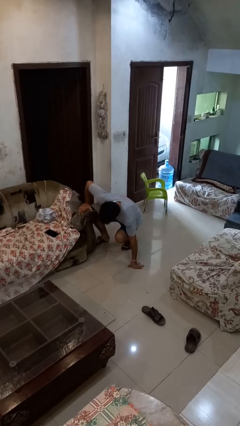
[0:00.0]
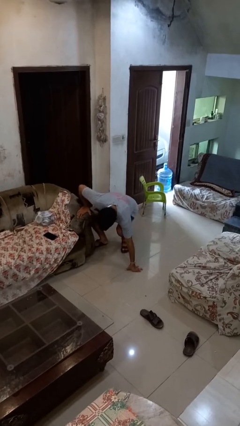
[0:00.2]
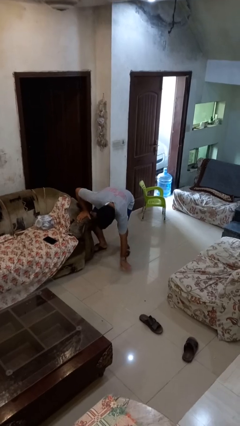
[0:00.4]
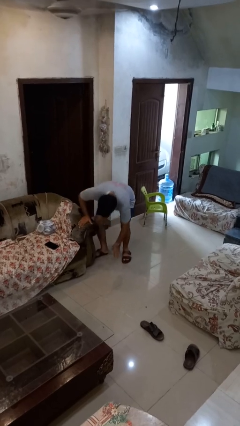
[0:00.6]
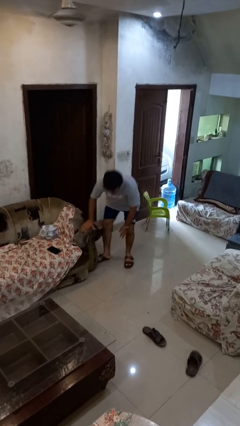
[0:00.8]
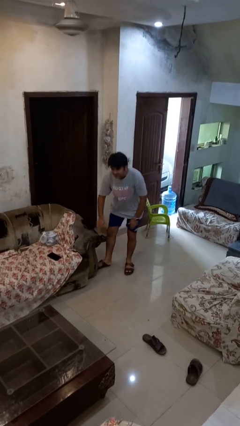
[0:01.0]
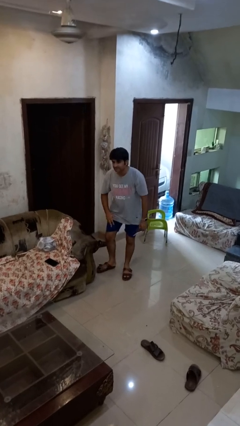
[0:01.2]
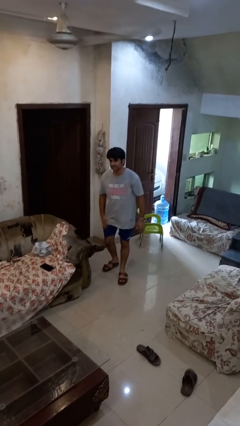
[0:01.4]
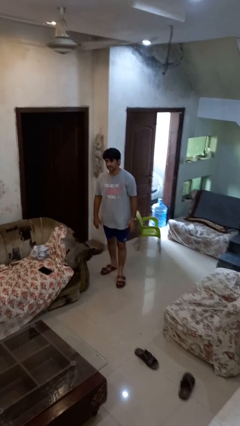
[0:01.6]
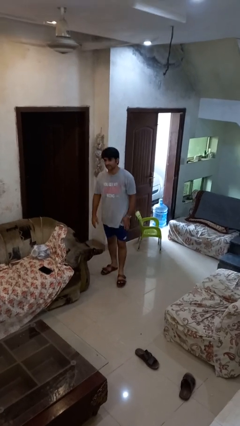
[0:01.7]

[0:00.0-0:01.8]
person stands up from floor

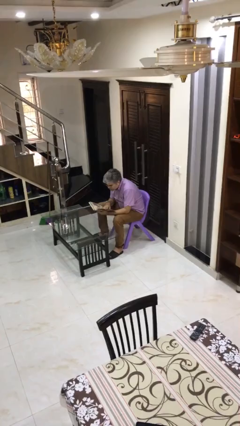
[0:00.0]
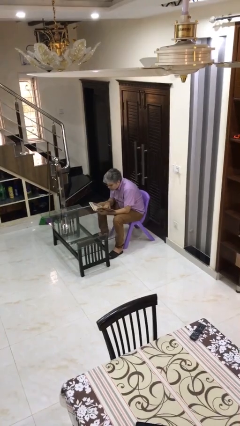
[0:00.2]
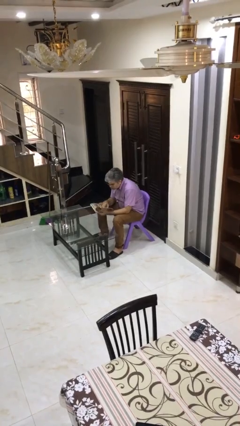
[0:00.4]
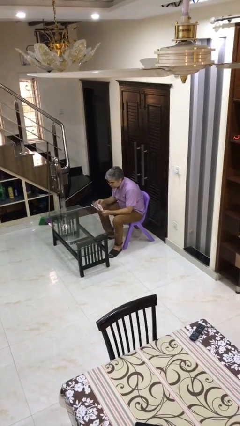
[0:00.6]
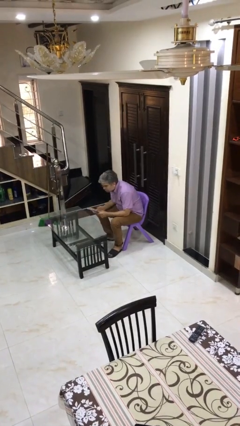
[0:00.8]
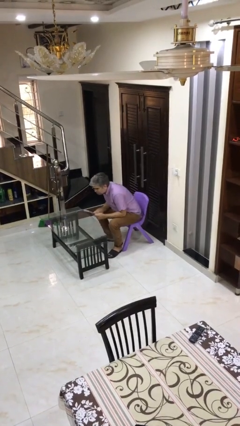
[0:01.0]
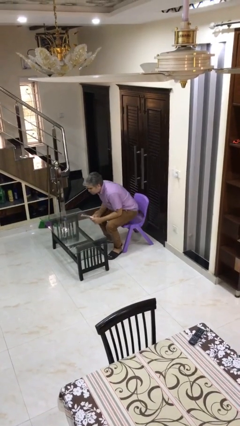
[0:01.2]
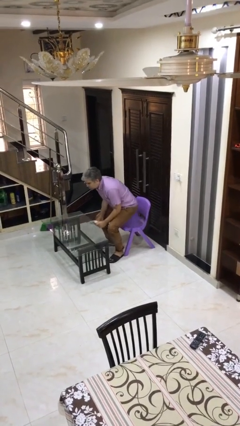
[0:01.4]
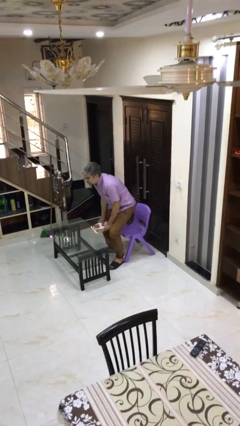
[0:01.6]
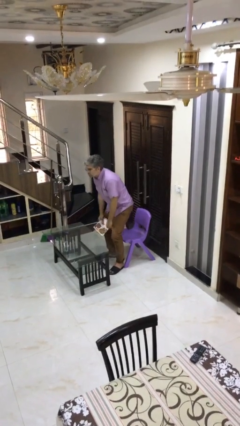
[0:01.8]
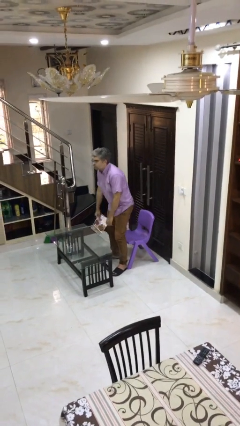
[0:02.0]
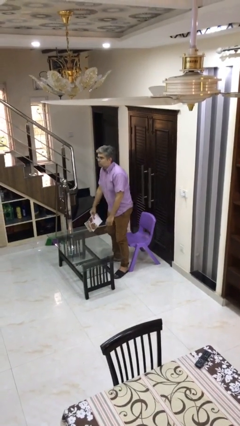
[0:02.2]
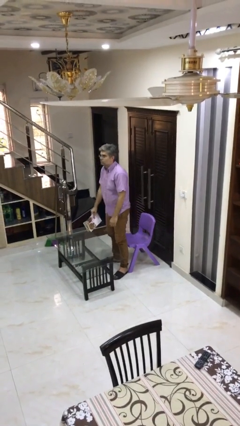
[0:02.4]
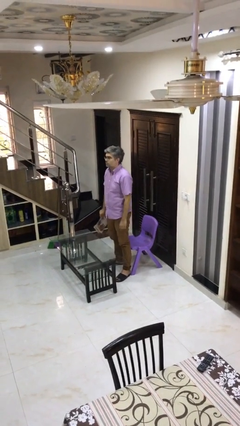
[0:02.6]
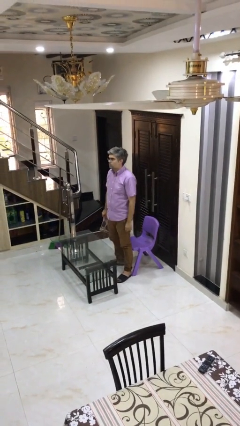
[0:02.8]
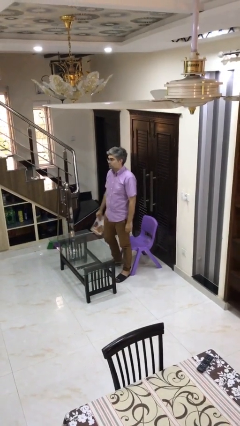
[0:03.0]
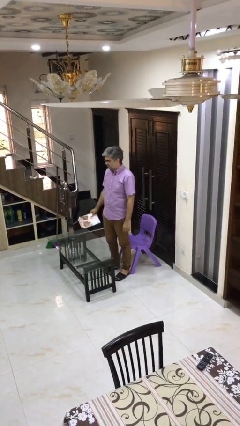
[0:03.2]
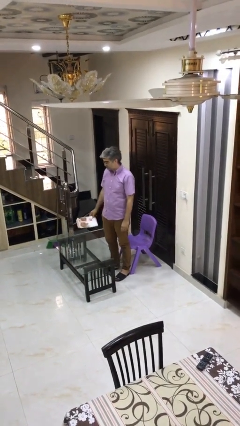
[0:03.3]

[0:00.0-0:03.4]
person stands up

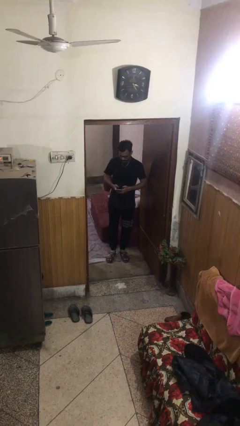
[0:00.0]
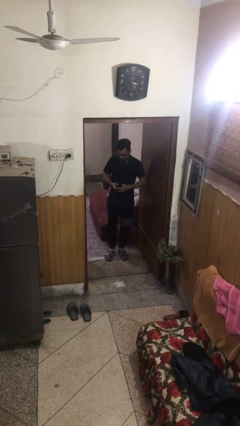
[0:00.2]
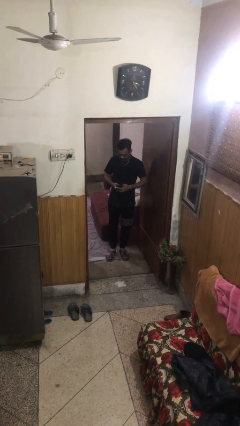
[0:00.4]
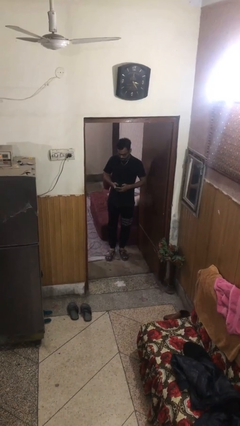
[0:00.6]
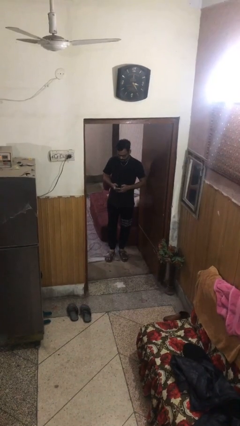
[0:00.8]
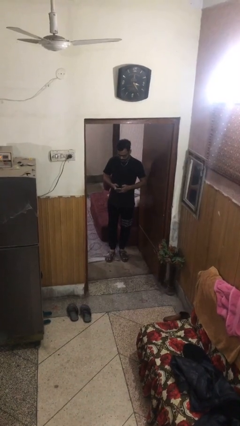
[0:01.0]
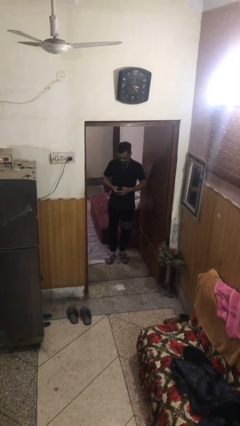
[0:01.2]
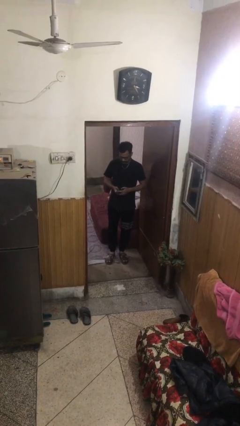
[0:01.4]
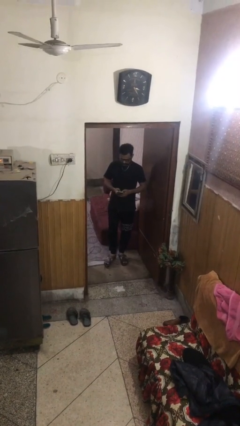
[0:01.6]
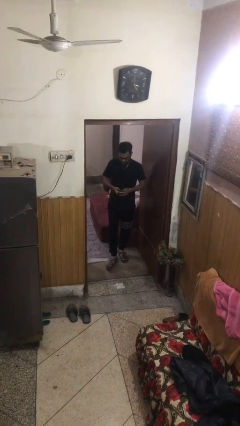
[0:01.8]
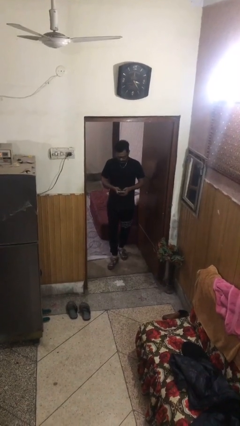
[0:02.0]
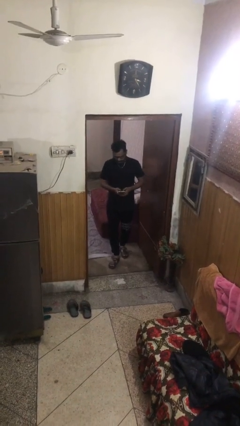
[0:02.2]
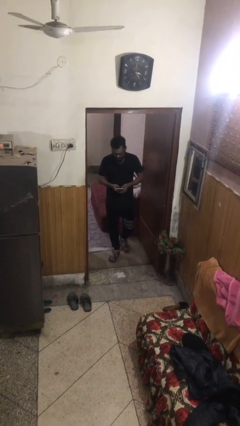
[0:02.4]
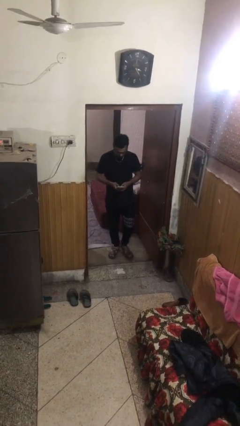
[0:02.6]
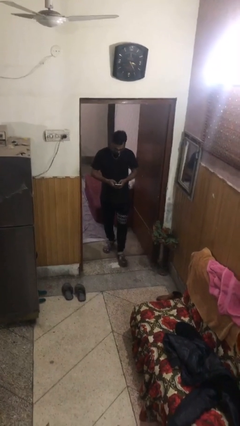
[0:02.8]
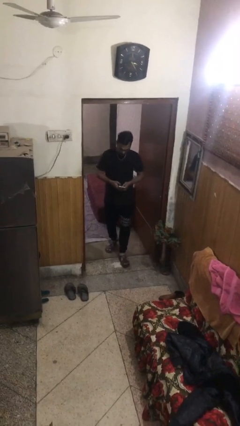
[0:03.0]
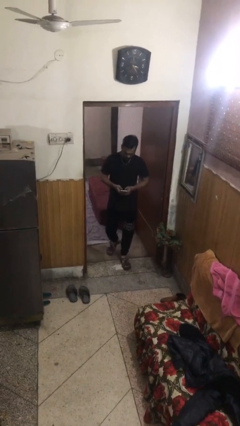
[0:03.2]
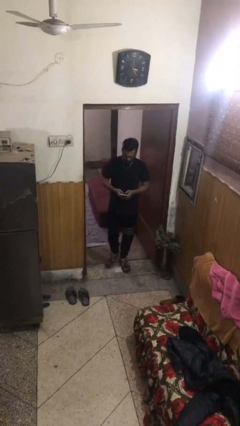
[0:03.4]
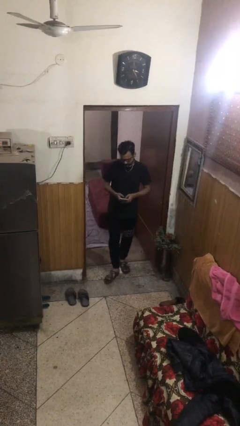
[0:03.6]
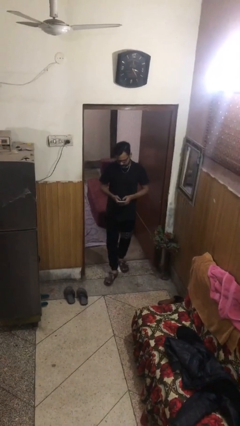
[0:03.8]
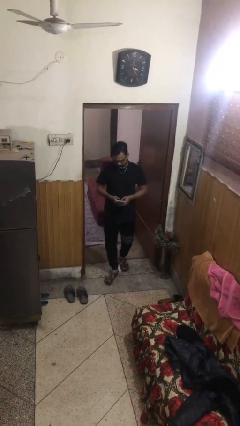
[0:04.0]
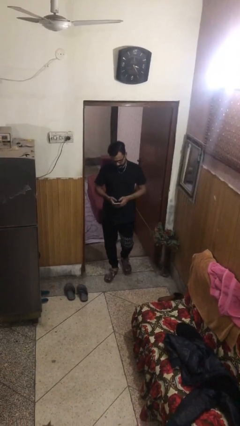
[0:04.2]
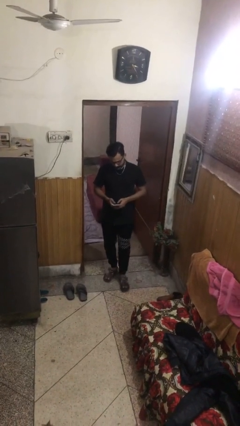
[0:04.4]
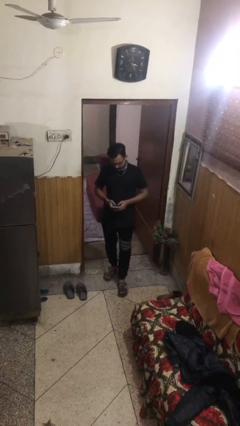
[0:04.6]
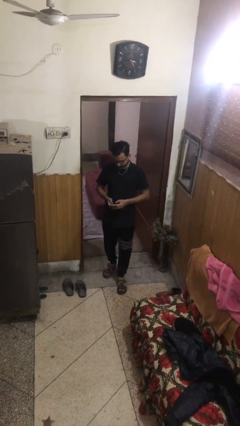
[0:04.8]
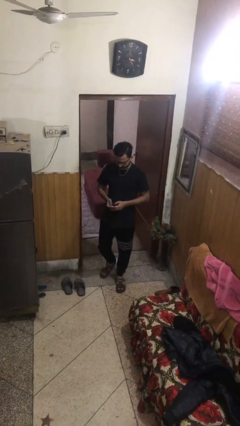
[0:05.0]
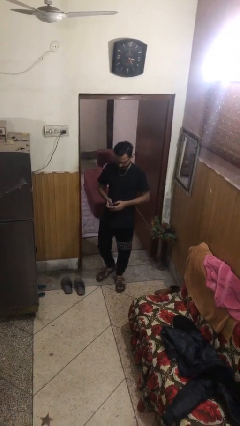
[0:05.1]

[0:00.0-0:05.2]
person enters scene through structure

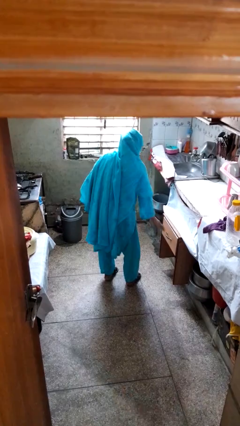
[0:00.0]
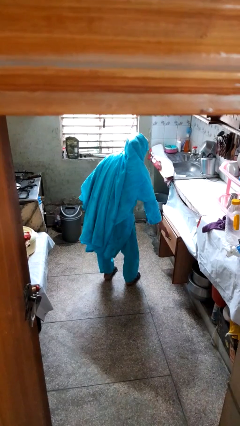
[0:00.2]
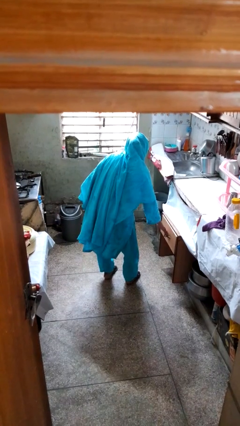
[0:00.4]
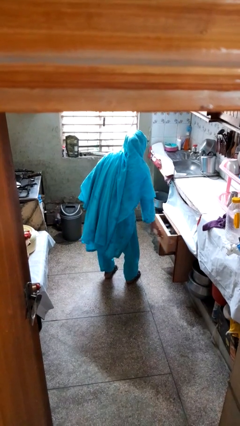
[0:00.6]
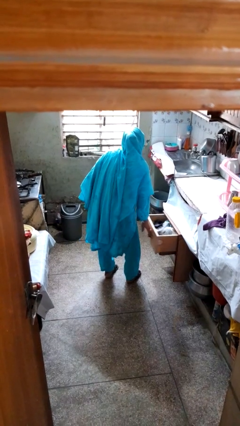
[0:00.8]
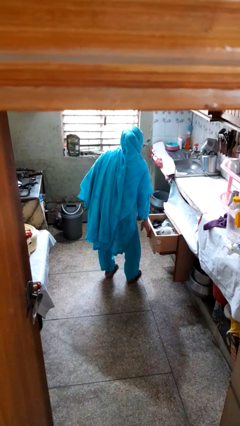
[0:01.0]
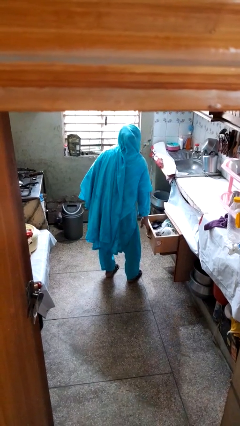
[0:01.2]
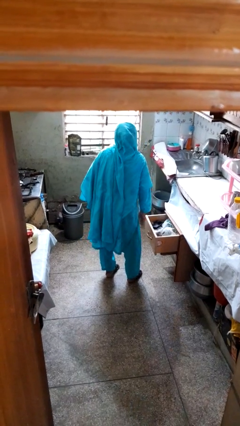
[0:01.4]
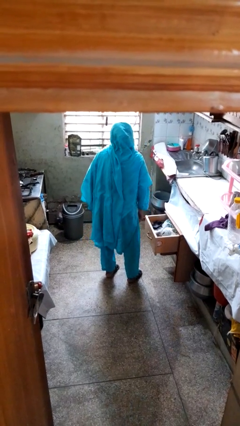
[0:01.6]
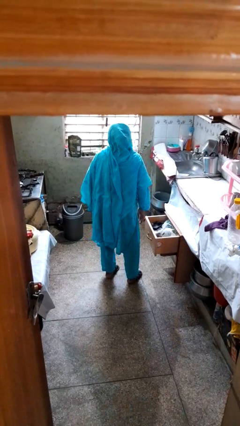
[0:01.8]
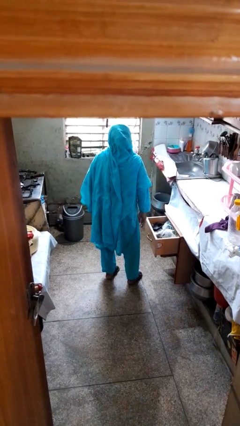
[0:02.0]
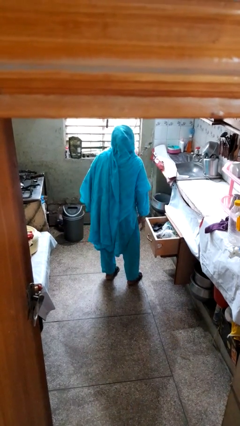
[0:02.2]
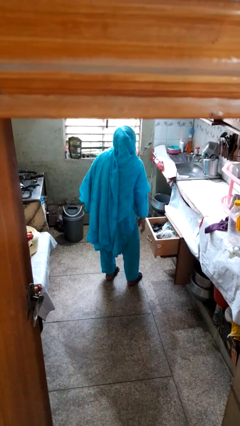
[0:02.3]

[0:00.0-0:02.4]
person opens kitchen drawer

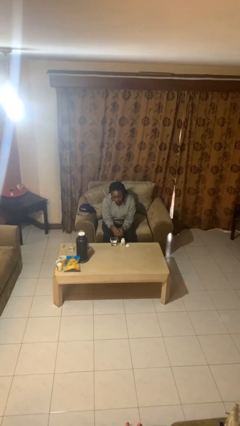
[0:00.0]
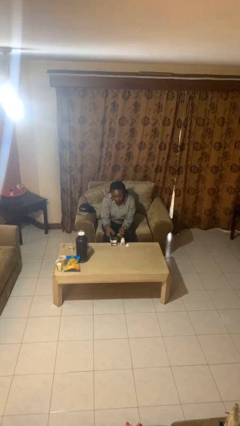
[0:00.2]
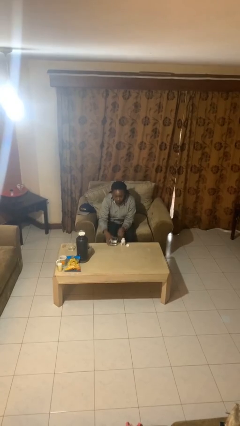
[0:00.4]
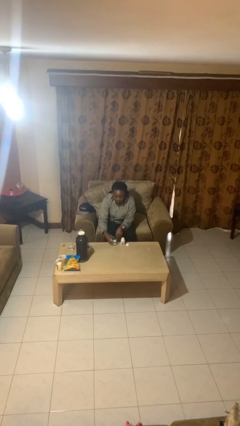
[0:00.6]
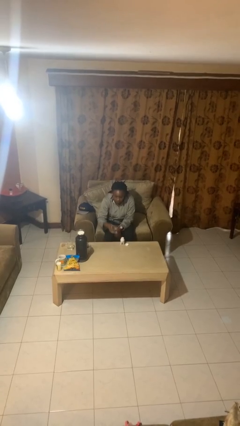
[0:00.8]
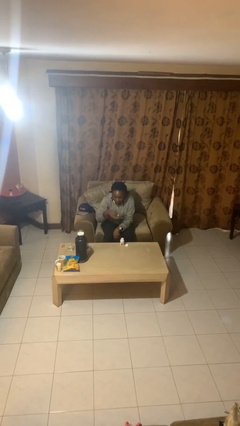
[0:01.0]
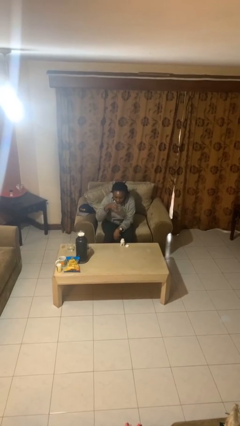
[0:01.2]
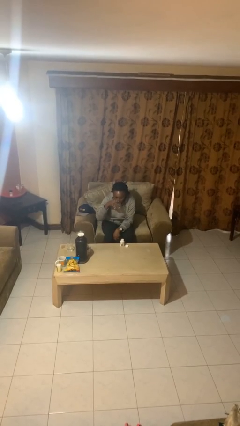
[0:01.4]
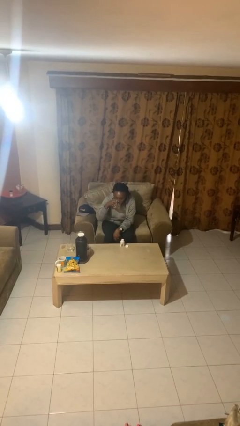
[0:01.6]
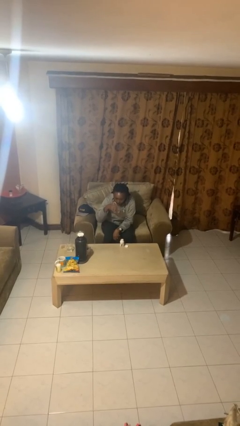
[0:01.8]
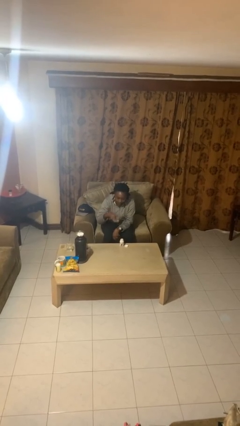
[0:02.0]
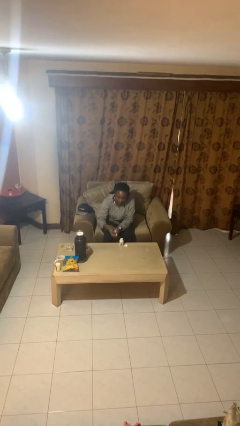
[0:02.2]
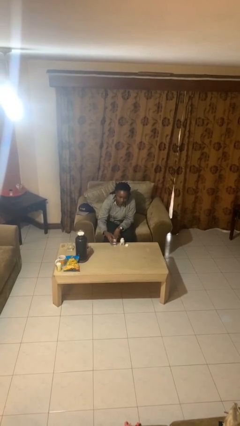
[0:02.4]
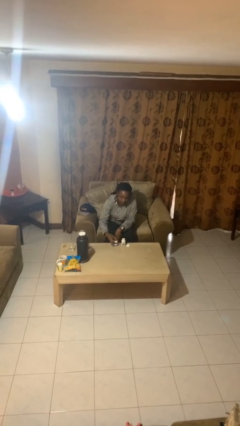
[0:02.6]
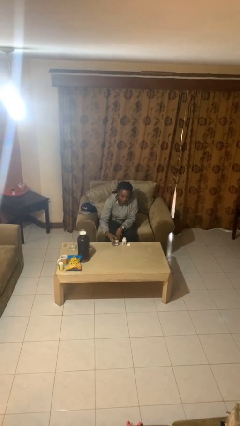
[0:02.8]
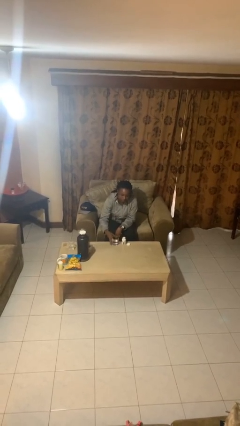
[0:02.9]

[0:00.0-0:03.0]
person drinks from cup

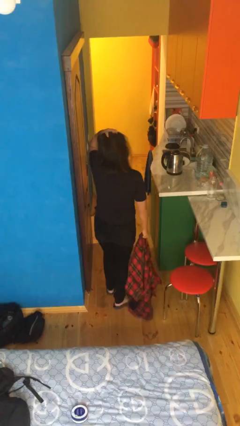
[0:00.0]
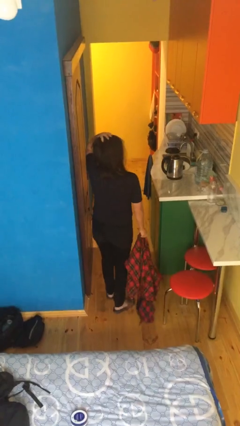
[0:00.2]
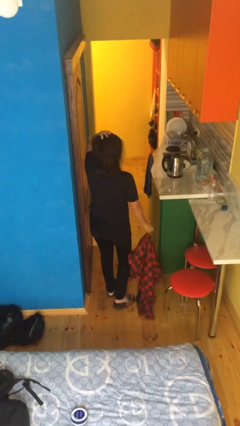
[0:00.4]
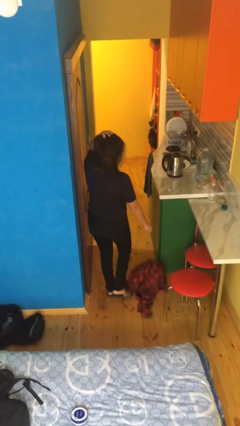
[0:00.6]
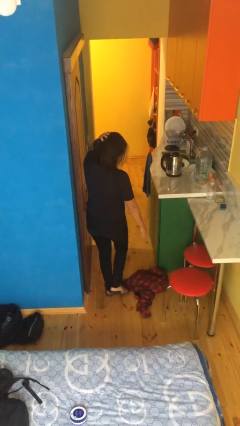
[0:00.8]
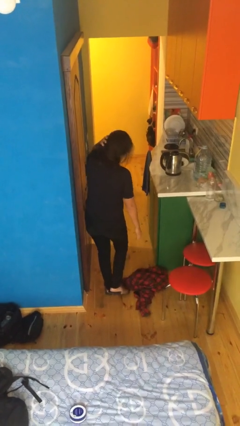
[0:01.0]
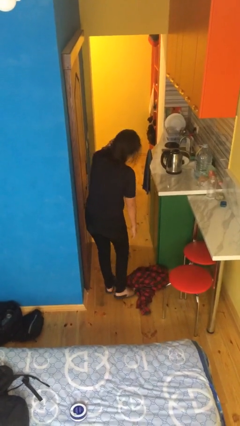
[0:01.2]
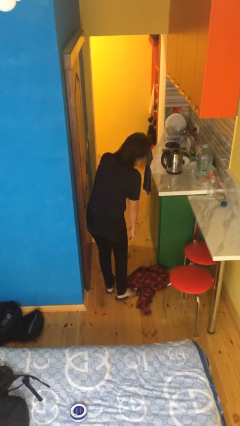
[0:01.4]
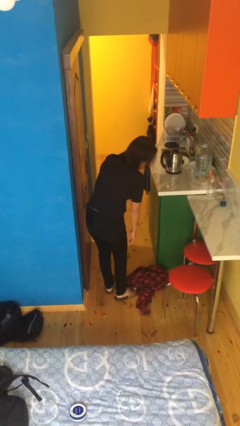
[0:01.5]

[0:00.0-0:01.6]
person drops object
